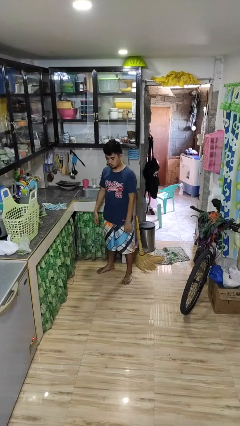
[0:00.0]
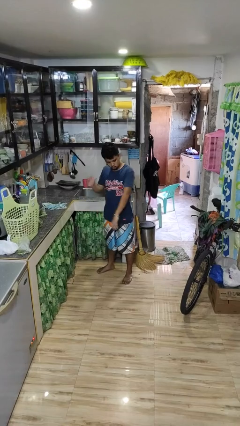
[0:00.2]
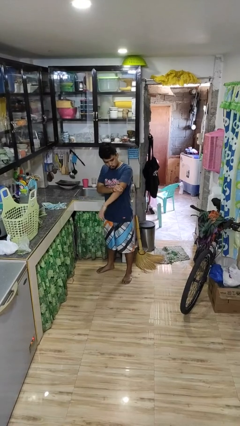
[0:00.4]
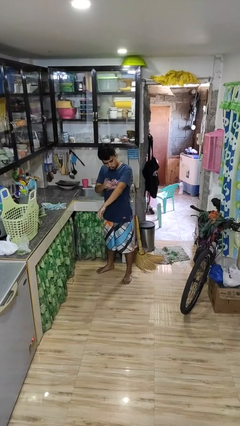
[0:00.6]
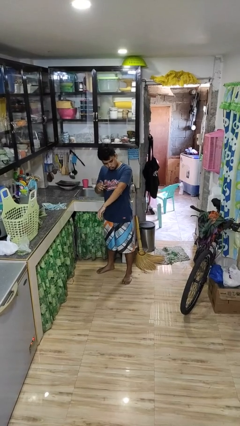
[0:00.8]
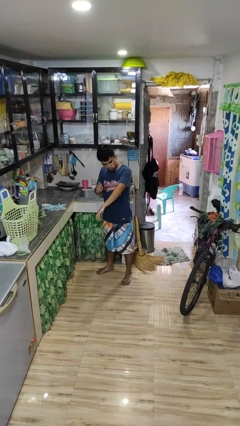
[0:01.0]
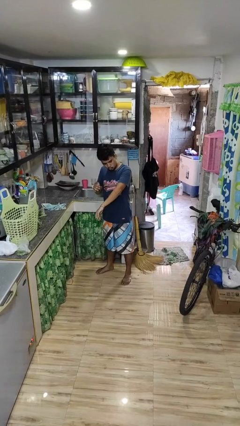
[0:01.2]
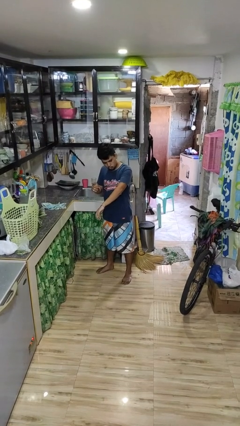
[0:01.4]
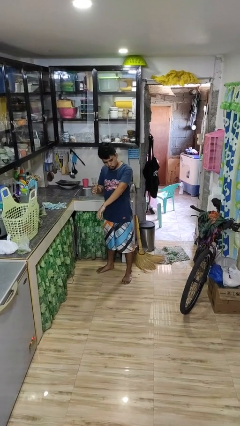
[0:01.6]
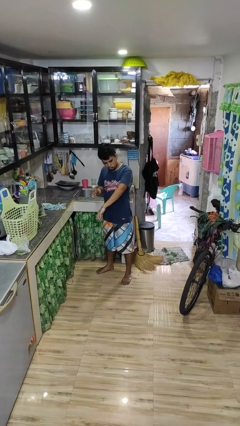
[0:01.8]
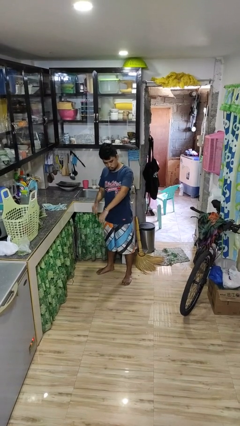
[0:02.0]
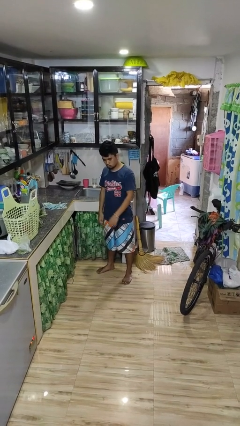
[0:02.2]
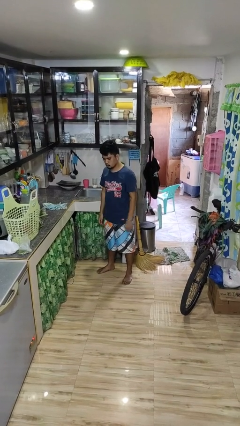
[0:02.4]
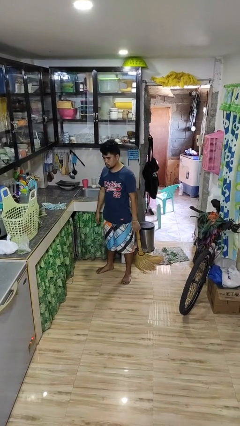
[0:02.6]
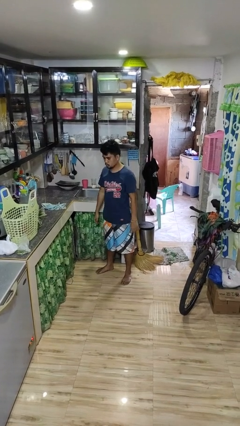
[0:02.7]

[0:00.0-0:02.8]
person swats bug

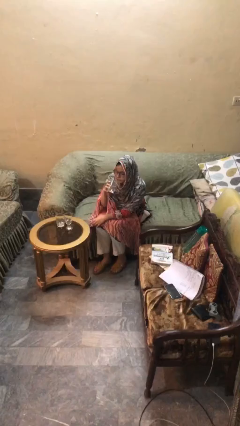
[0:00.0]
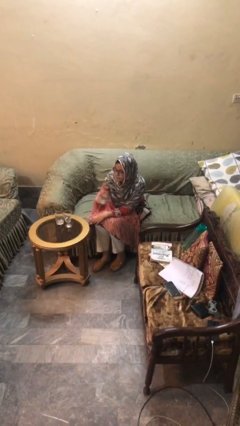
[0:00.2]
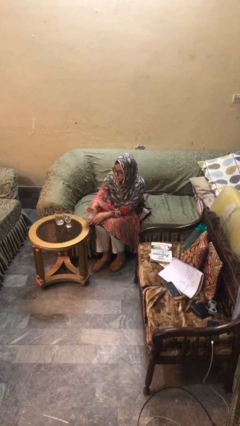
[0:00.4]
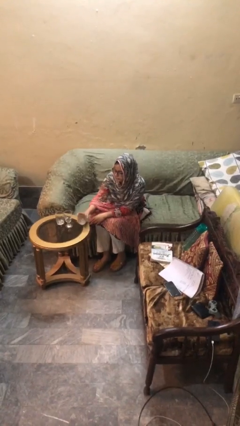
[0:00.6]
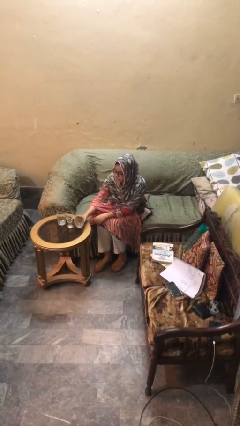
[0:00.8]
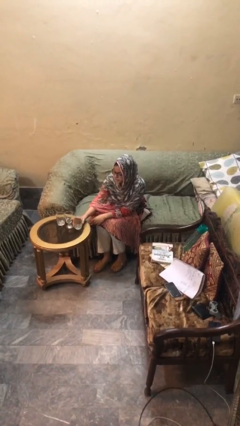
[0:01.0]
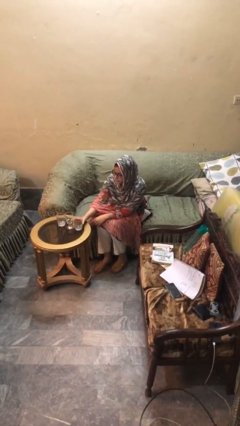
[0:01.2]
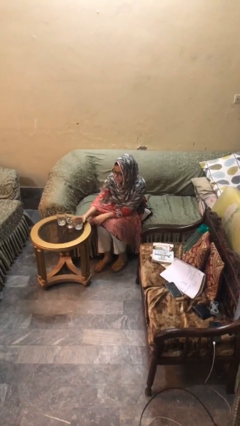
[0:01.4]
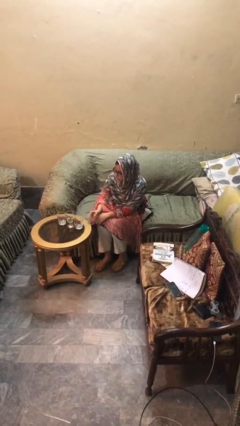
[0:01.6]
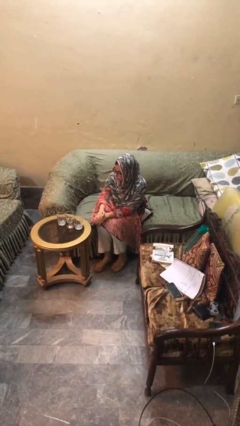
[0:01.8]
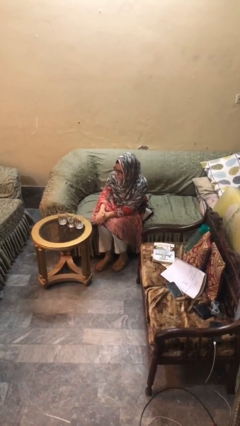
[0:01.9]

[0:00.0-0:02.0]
person puts down object on table

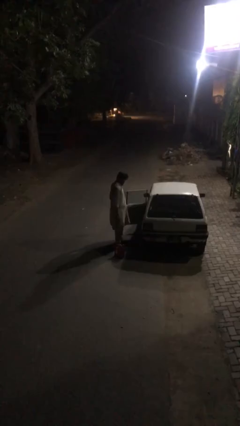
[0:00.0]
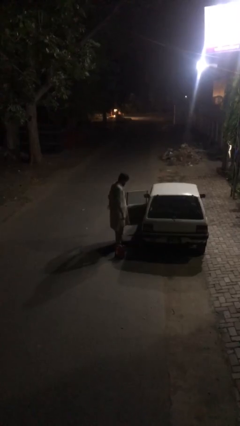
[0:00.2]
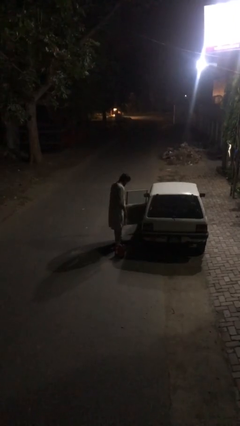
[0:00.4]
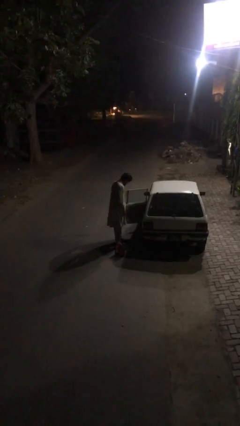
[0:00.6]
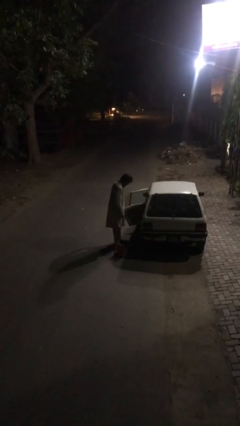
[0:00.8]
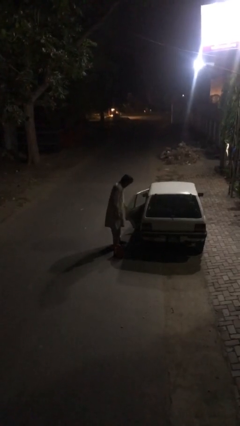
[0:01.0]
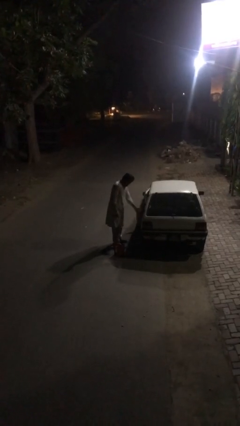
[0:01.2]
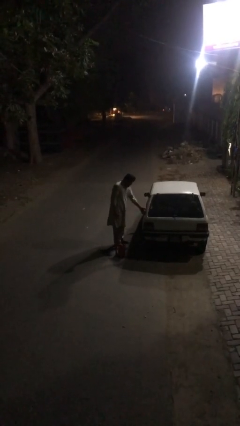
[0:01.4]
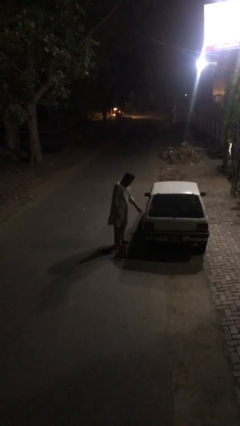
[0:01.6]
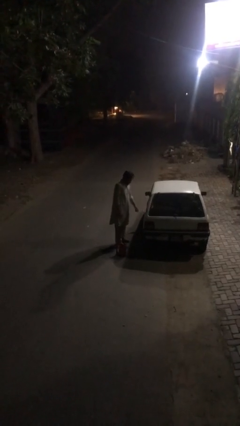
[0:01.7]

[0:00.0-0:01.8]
person closes car door

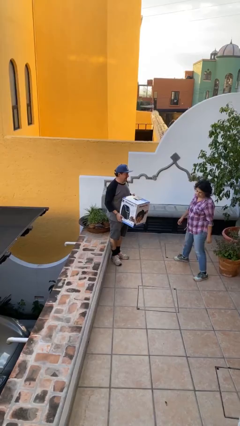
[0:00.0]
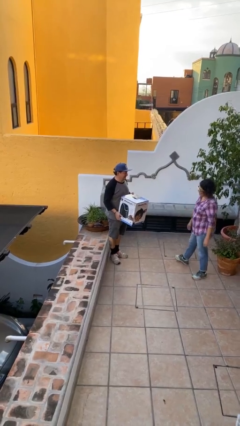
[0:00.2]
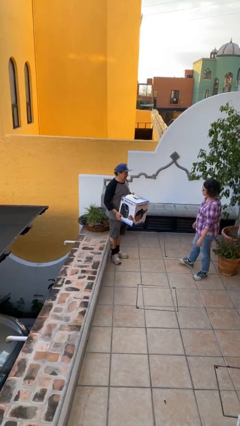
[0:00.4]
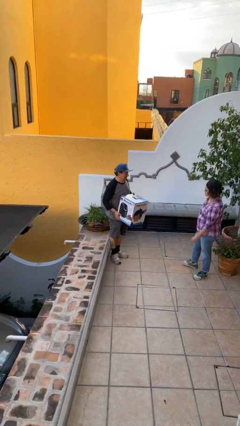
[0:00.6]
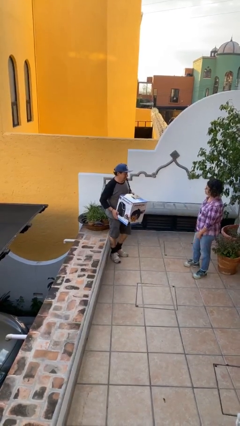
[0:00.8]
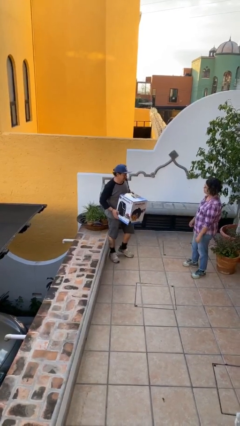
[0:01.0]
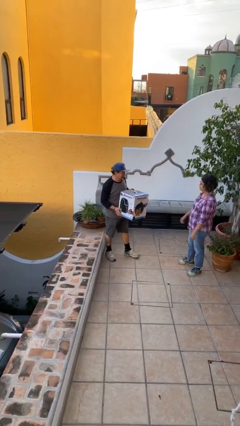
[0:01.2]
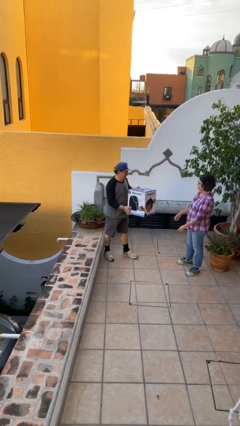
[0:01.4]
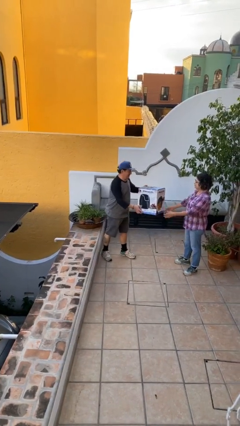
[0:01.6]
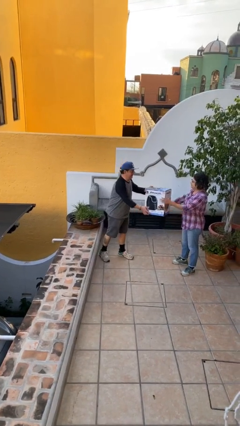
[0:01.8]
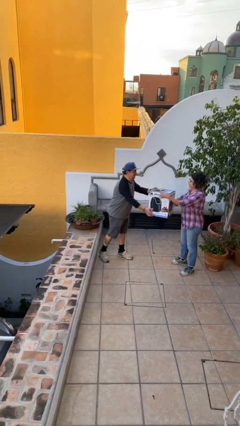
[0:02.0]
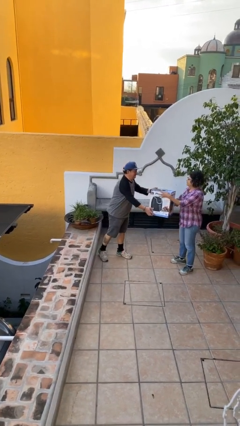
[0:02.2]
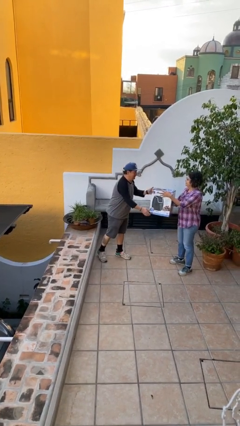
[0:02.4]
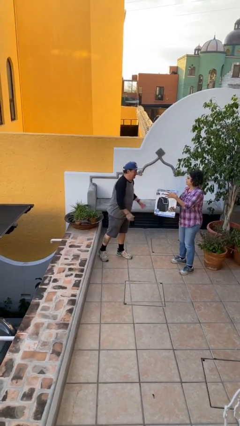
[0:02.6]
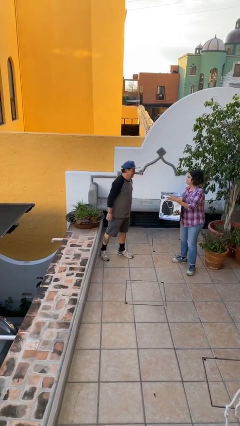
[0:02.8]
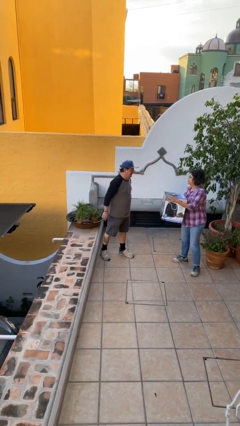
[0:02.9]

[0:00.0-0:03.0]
person transfers object to person

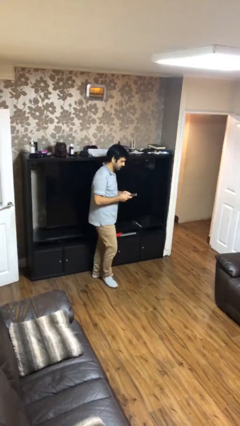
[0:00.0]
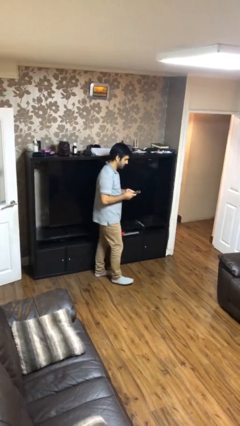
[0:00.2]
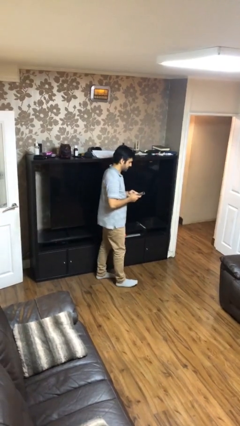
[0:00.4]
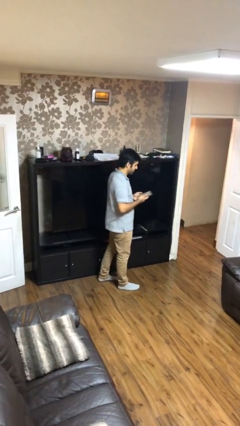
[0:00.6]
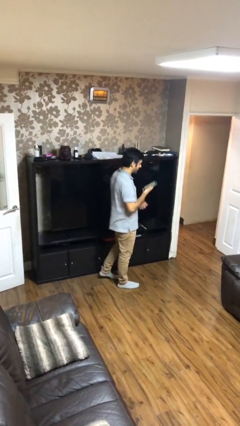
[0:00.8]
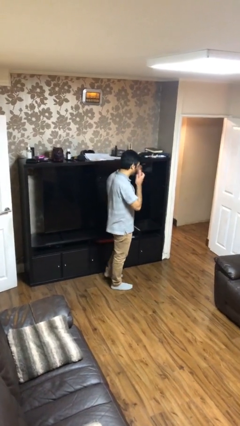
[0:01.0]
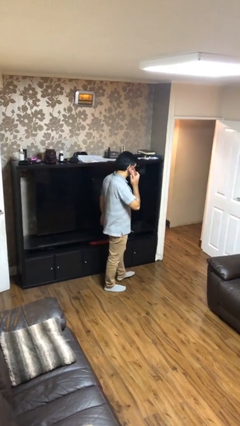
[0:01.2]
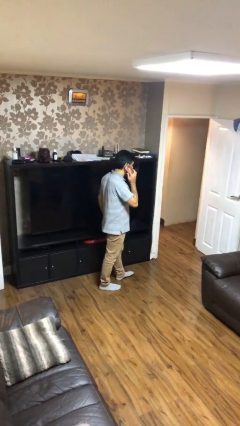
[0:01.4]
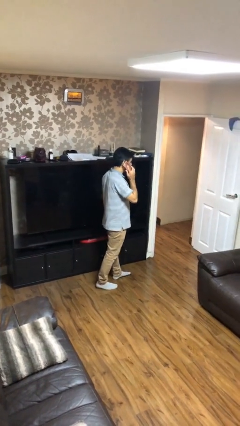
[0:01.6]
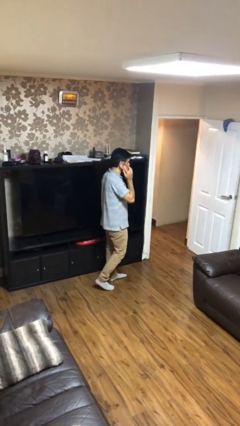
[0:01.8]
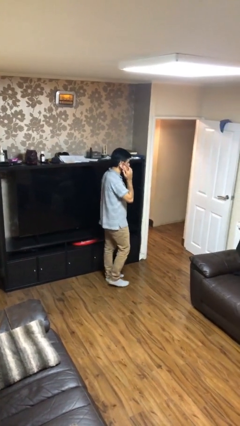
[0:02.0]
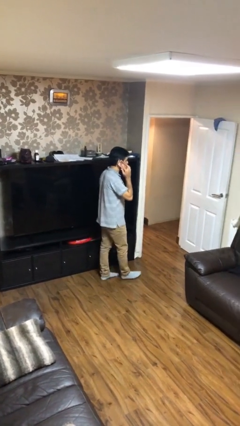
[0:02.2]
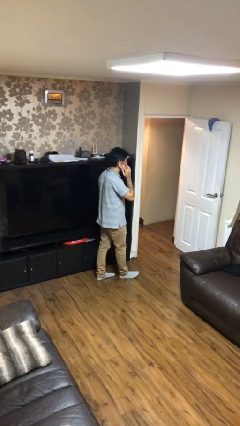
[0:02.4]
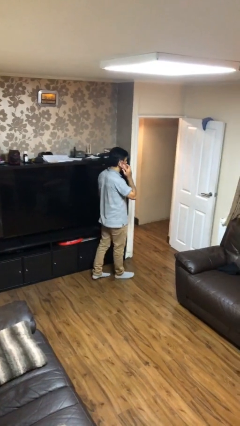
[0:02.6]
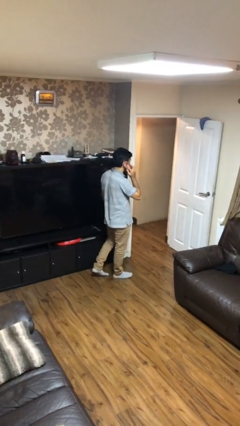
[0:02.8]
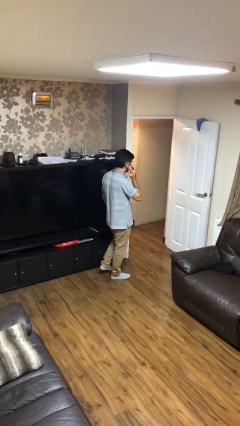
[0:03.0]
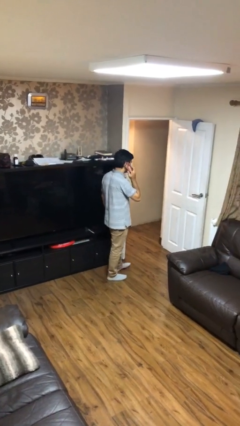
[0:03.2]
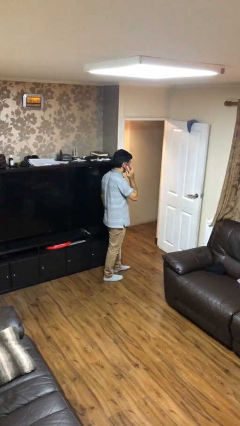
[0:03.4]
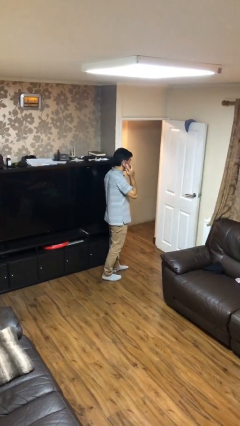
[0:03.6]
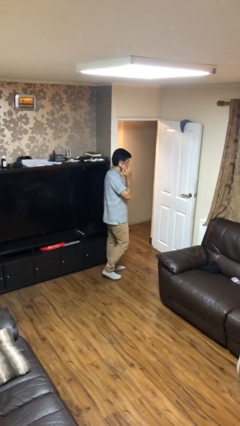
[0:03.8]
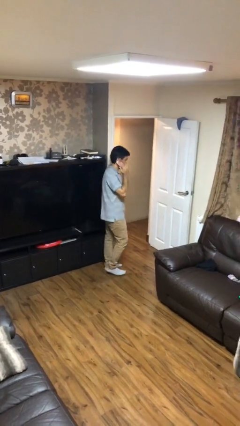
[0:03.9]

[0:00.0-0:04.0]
person talks on phone

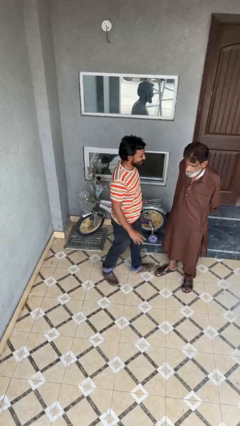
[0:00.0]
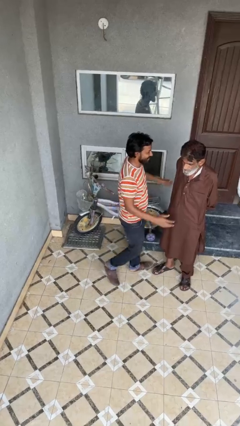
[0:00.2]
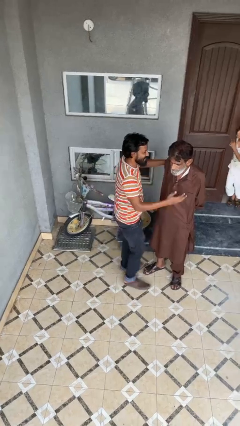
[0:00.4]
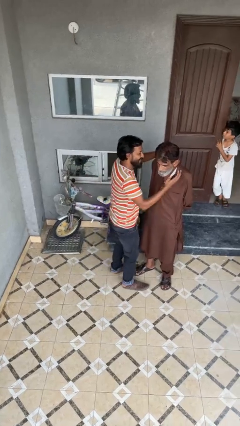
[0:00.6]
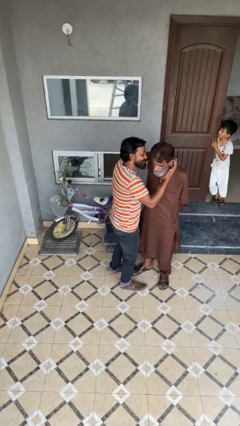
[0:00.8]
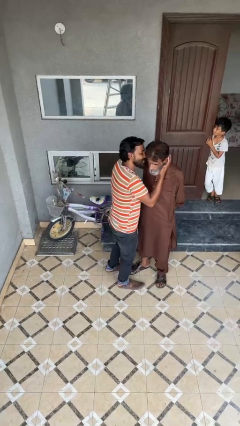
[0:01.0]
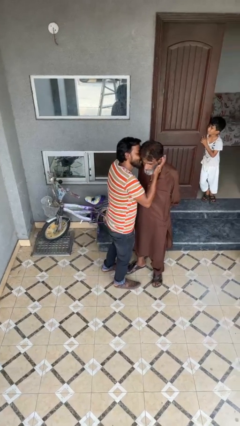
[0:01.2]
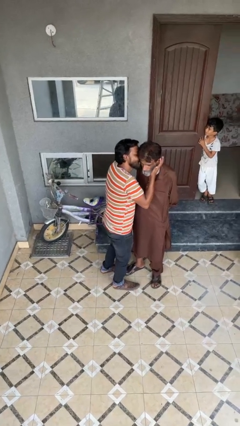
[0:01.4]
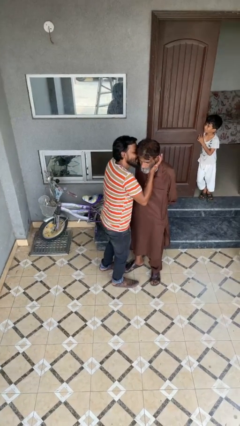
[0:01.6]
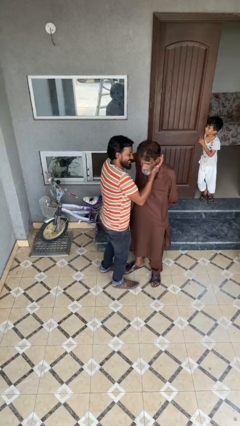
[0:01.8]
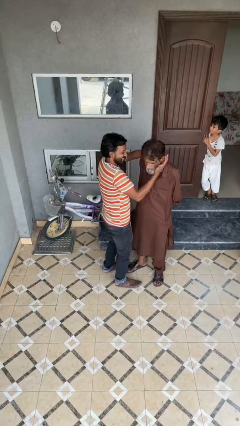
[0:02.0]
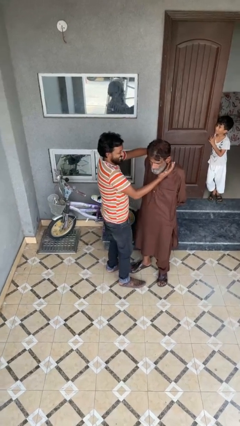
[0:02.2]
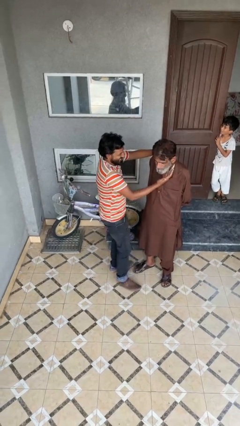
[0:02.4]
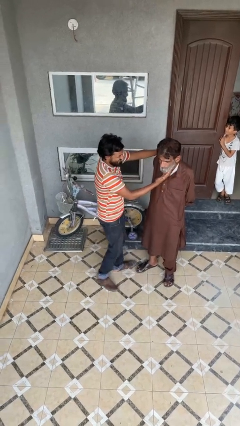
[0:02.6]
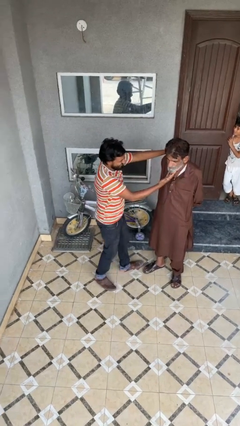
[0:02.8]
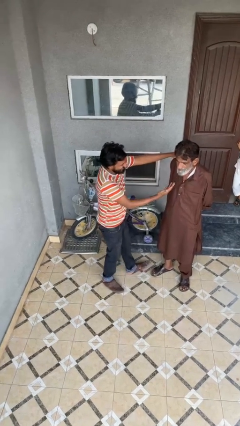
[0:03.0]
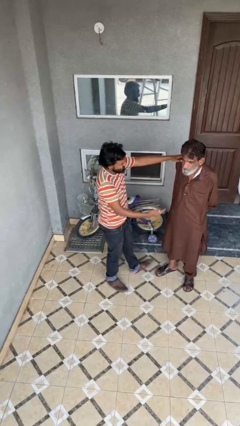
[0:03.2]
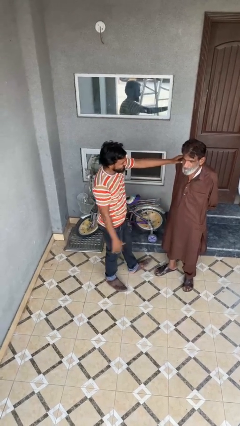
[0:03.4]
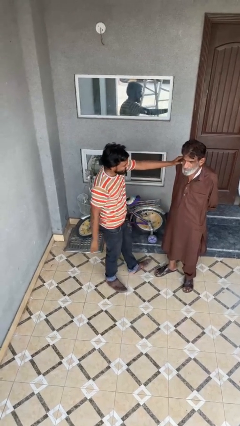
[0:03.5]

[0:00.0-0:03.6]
person kisses cheek of person

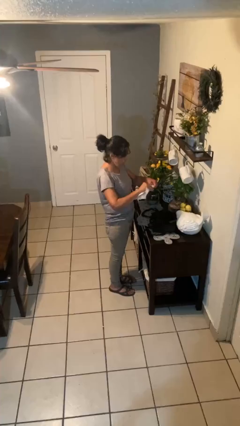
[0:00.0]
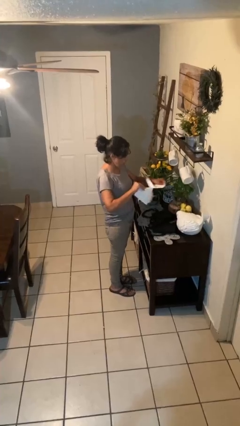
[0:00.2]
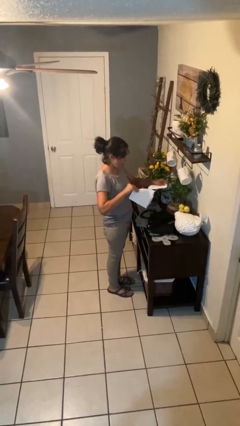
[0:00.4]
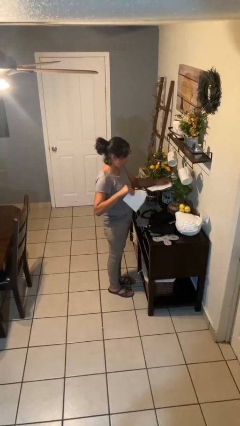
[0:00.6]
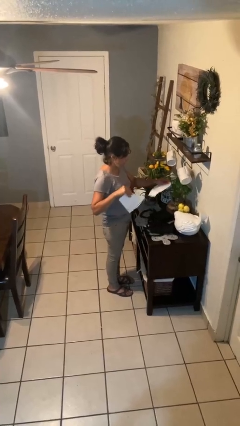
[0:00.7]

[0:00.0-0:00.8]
person tears paper
